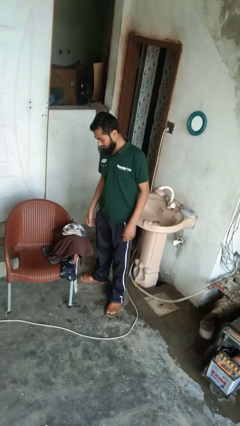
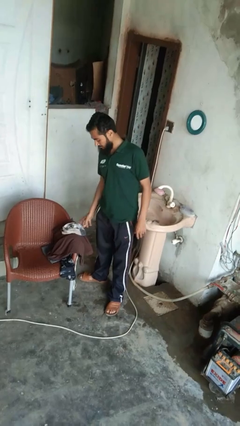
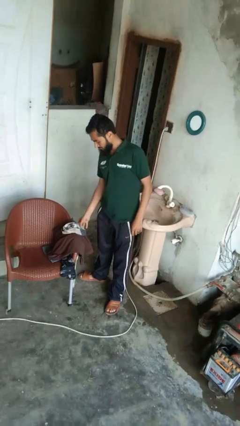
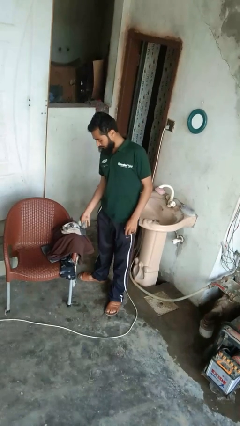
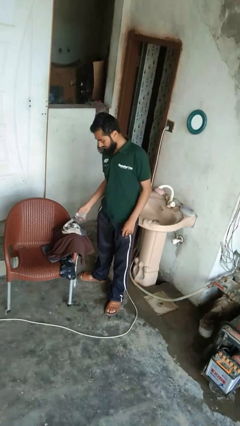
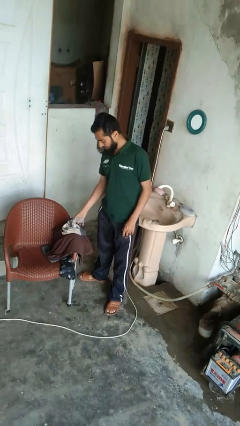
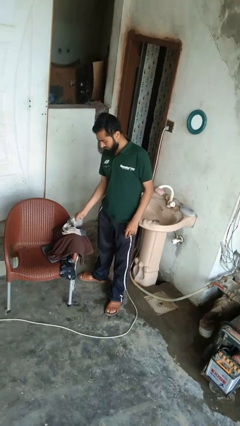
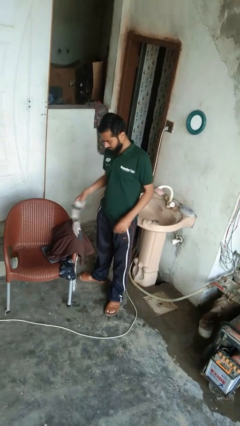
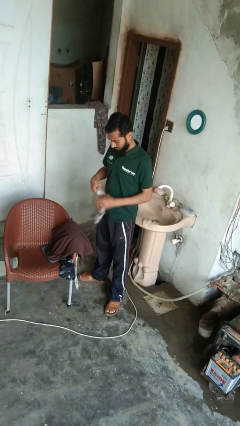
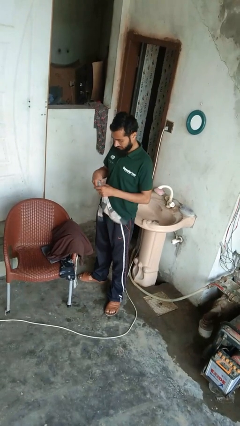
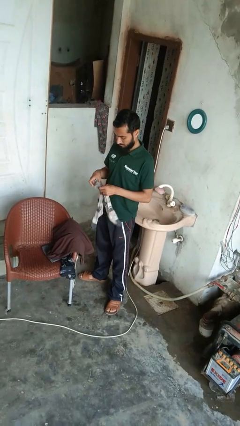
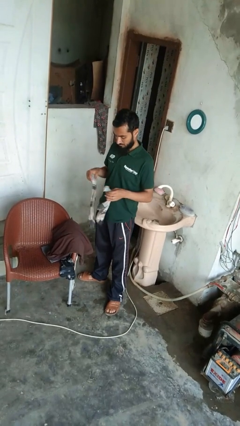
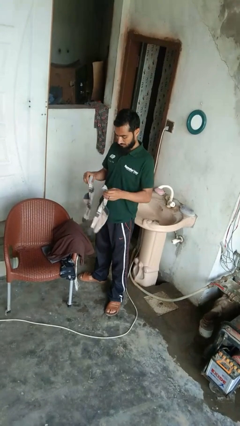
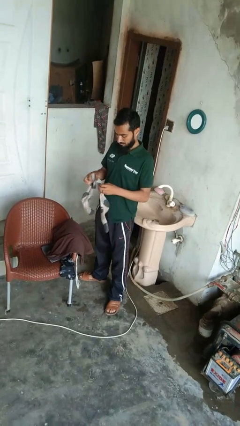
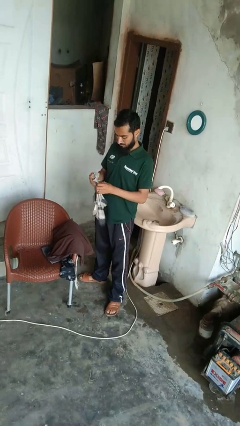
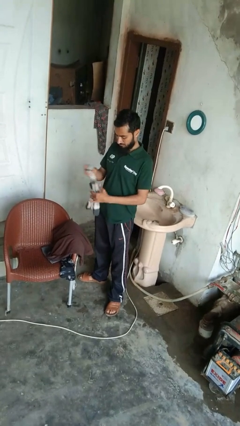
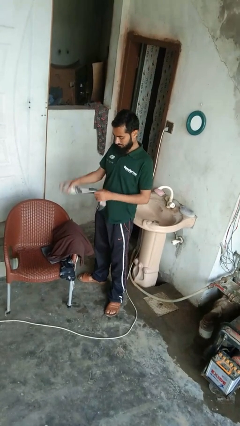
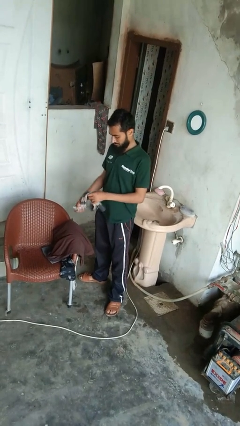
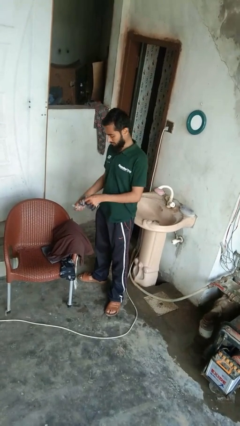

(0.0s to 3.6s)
person folds socks

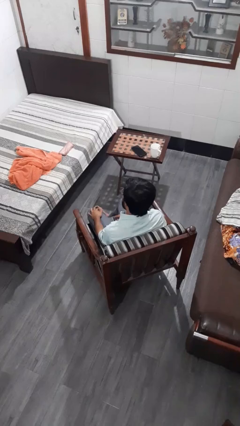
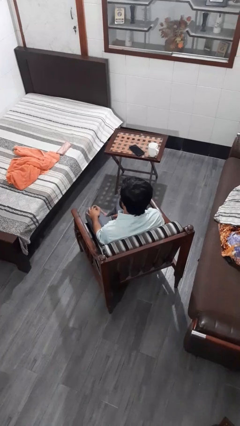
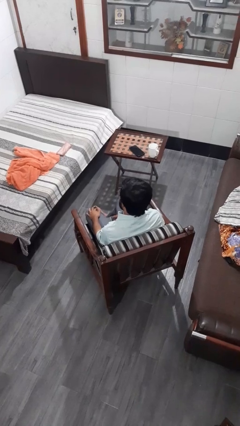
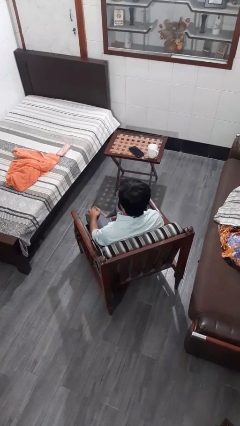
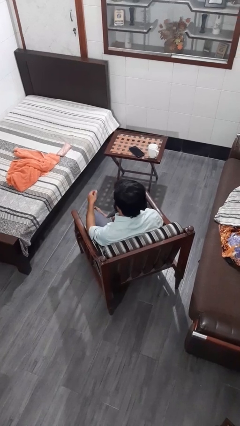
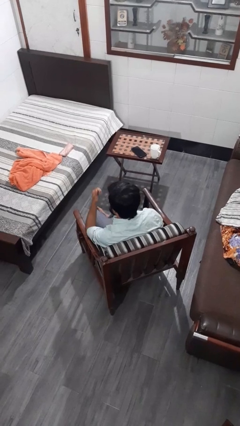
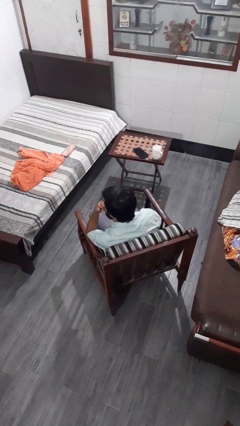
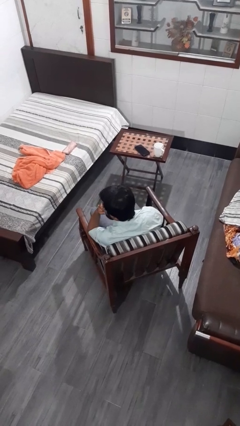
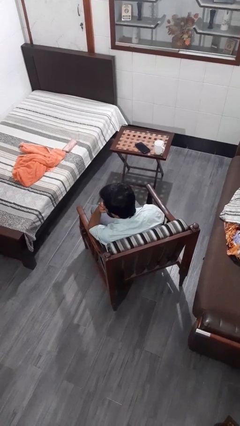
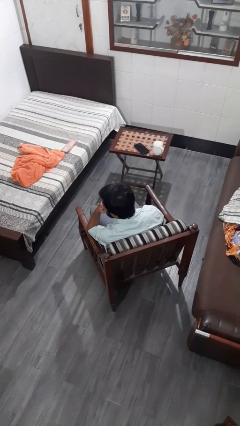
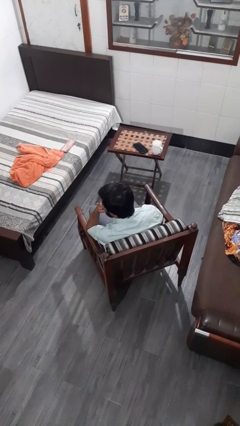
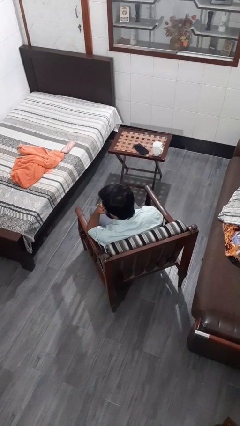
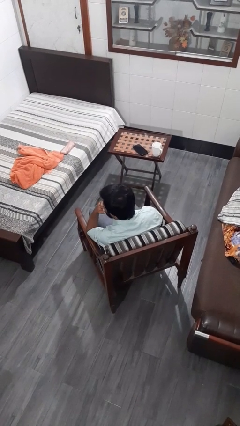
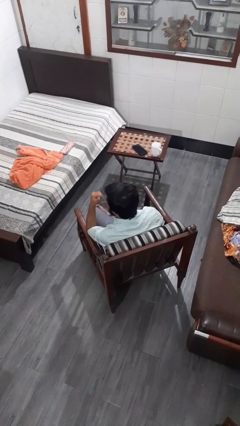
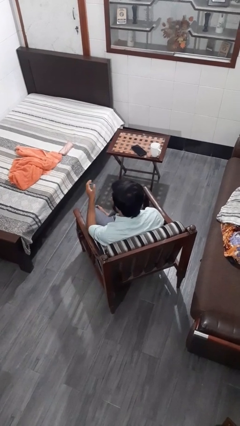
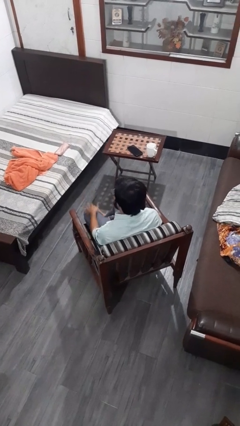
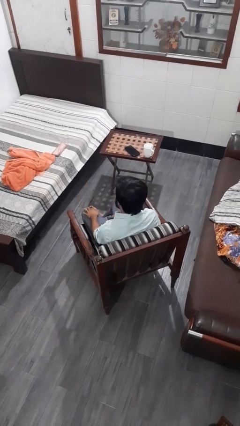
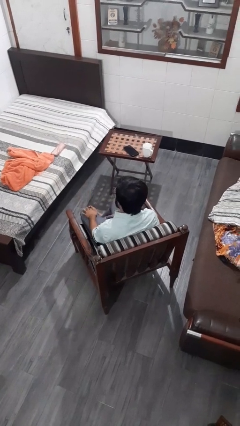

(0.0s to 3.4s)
person strokes chin

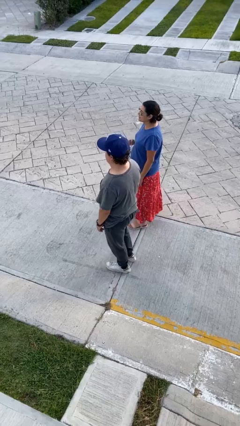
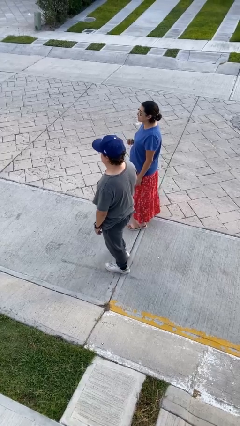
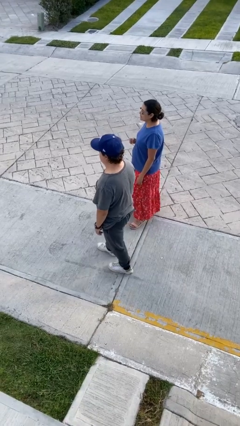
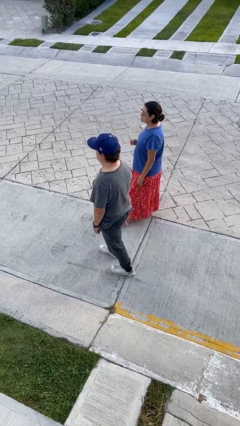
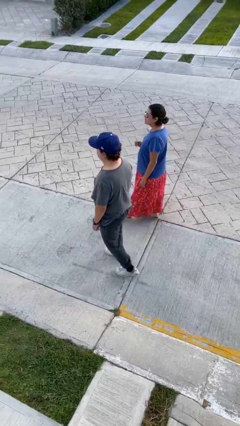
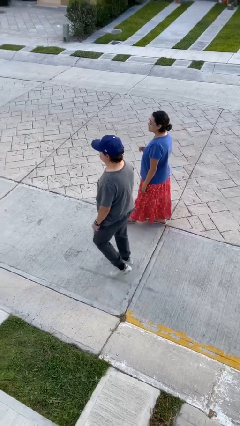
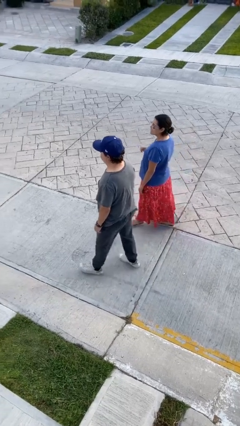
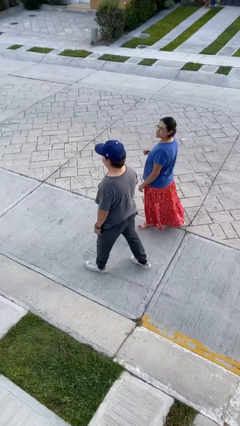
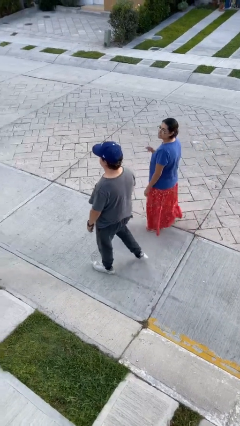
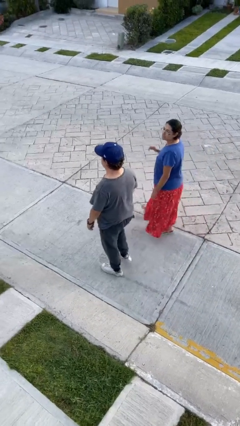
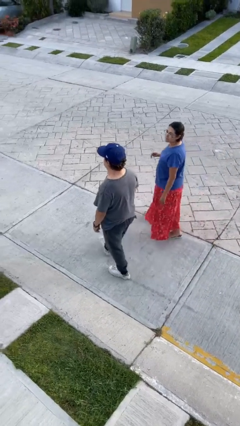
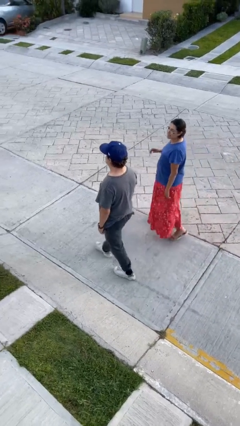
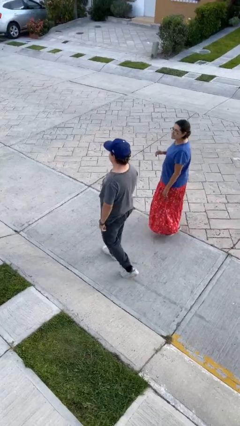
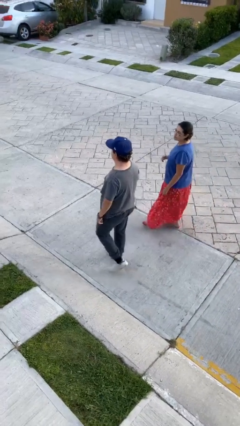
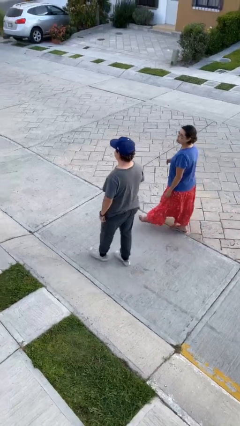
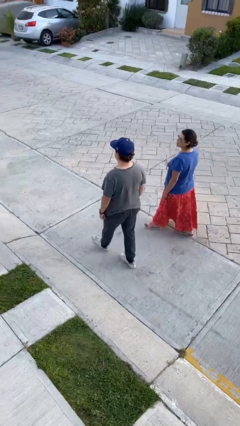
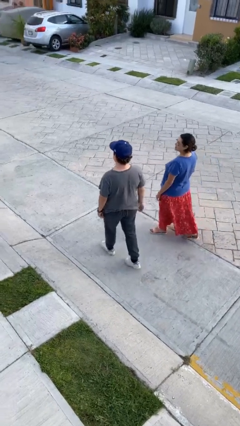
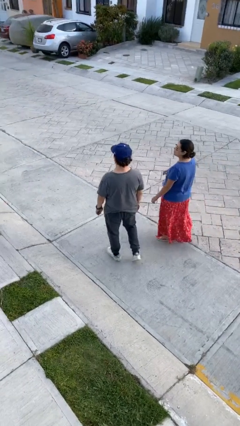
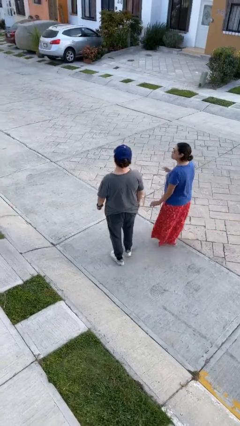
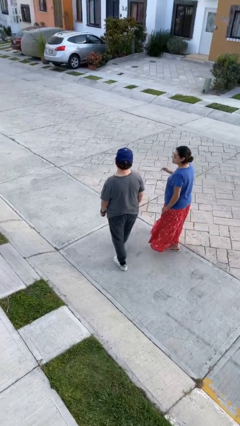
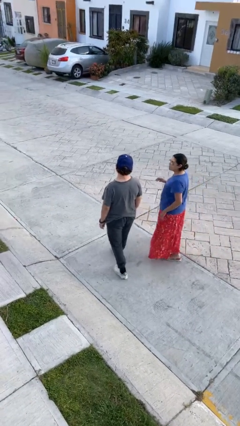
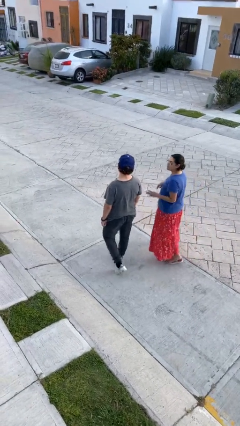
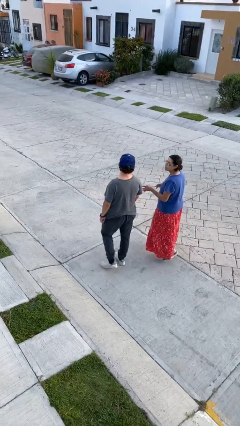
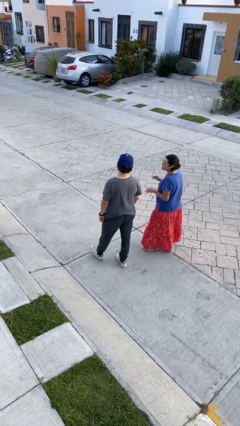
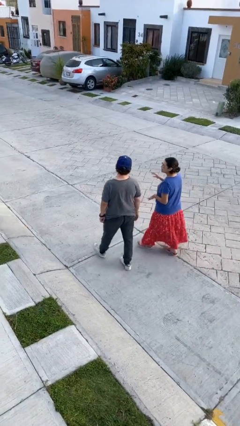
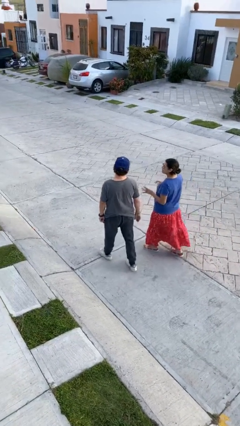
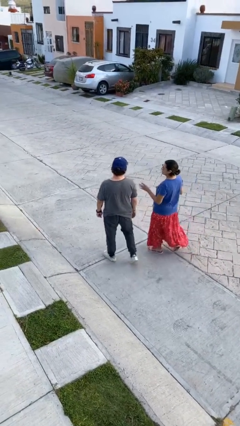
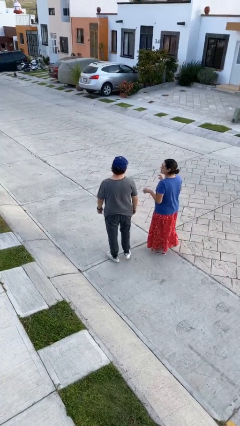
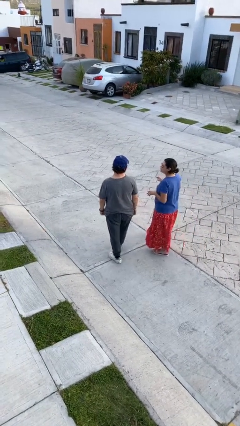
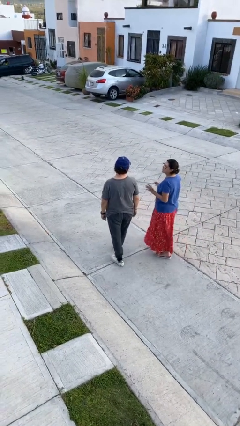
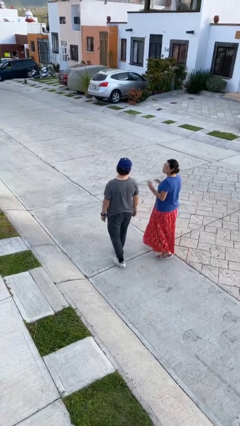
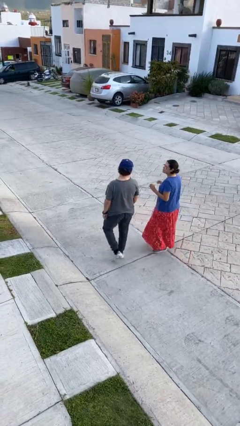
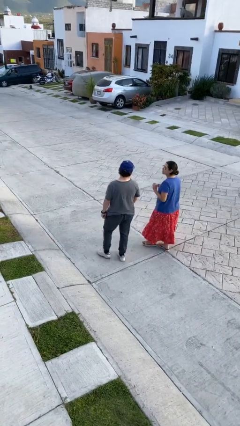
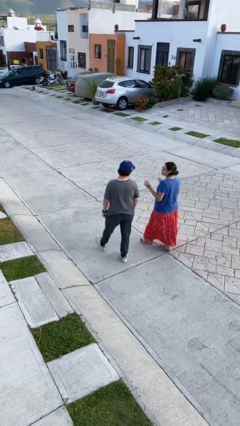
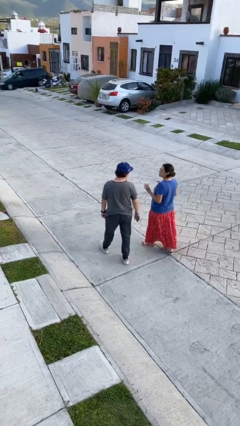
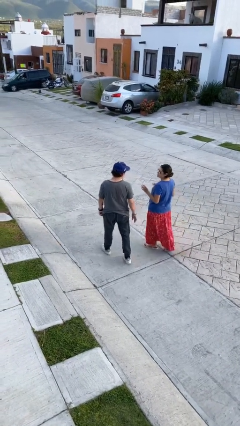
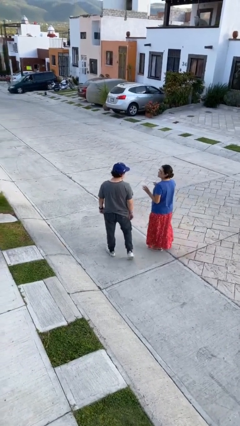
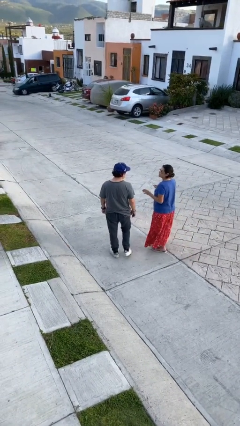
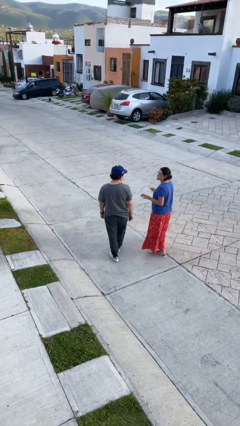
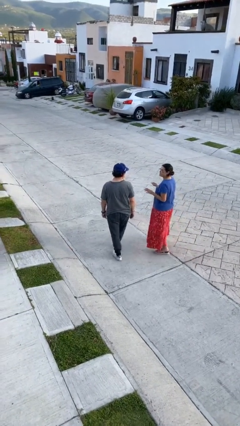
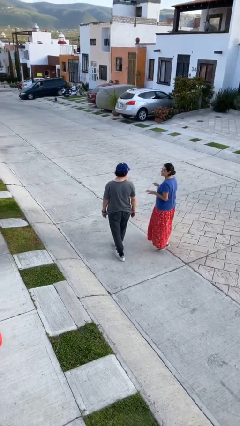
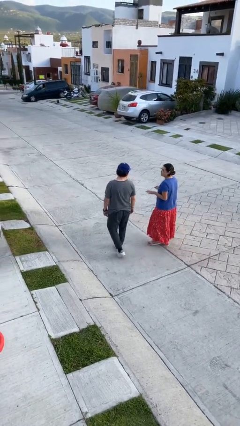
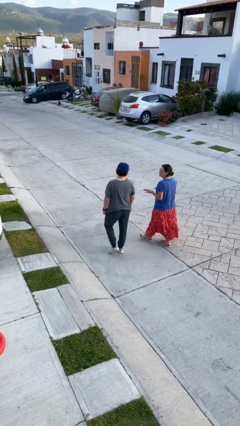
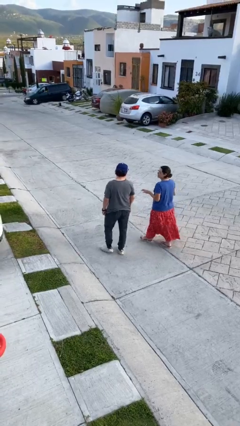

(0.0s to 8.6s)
person talks to person

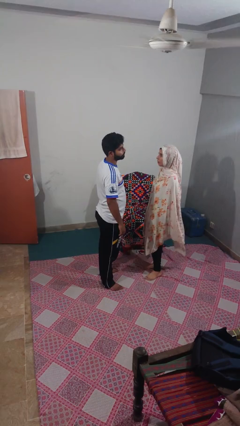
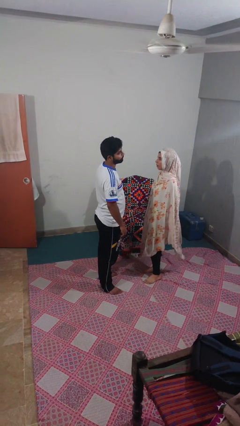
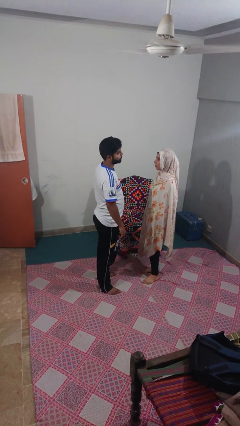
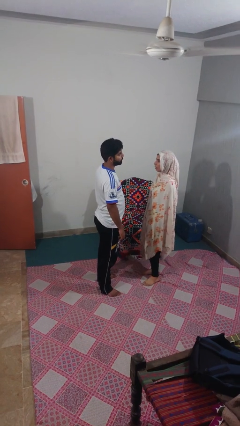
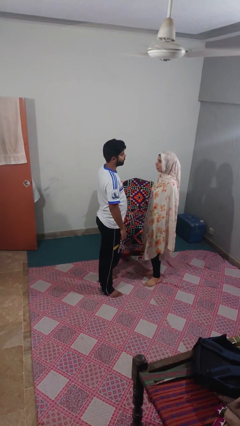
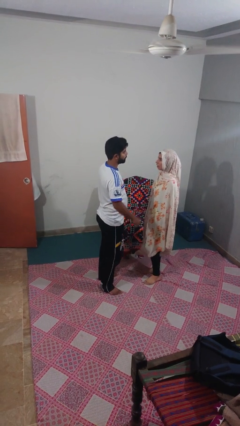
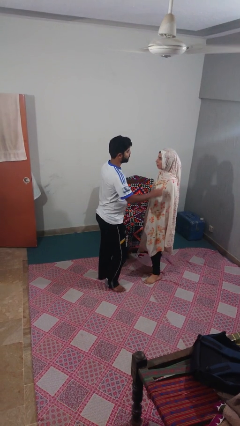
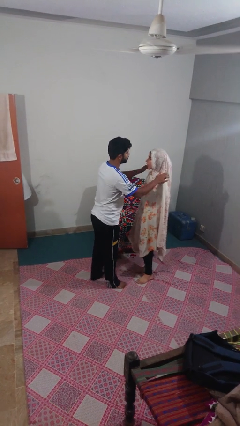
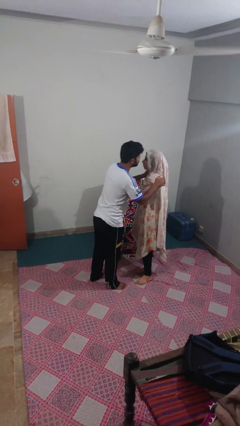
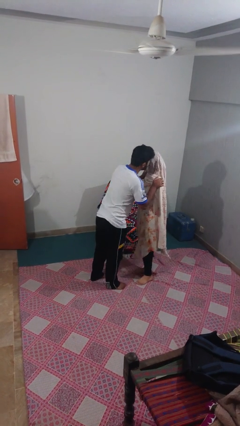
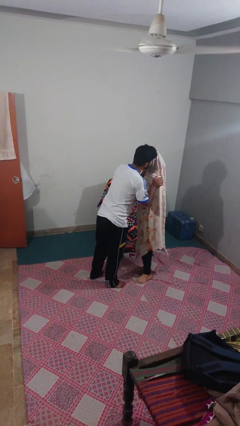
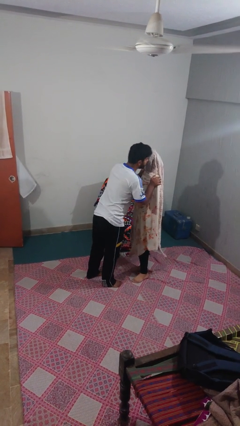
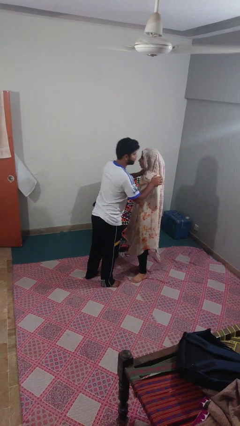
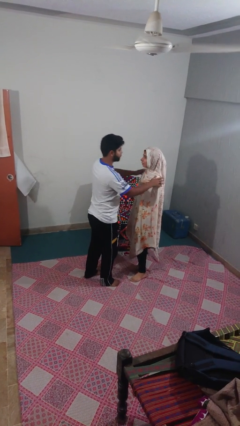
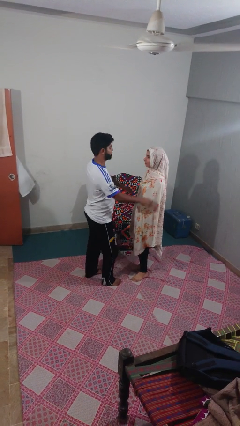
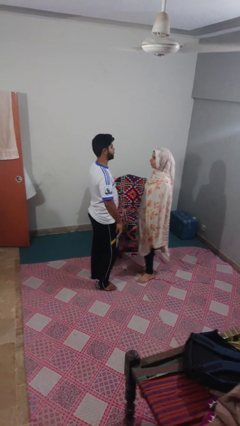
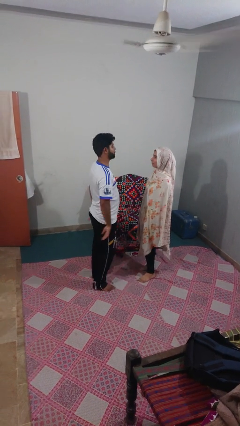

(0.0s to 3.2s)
person kisses cheek of person
